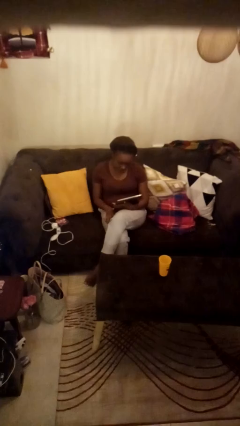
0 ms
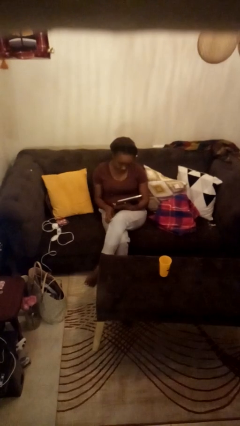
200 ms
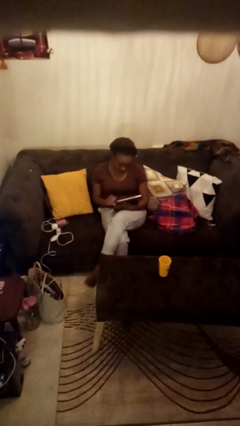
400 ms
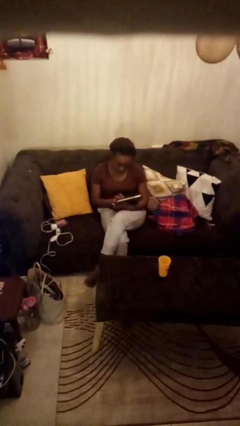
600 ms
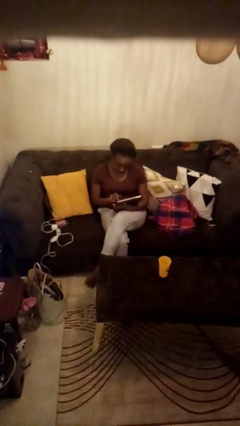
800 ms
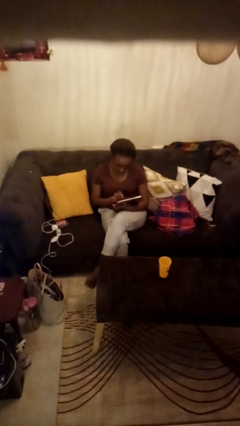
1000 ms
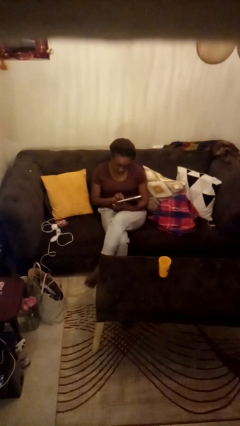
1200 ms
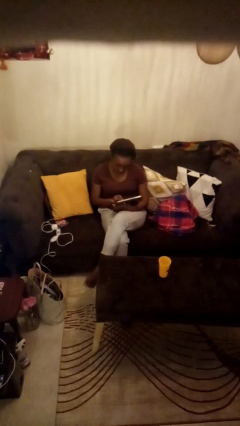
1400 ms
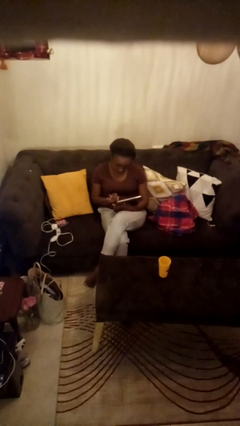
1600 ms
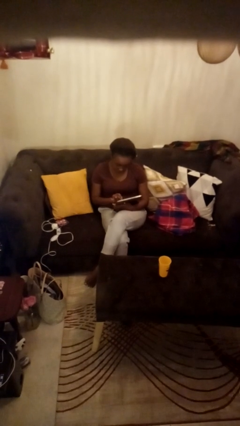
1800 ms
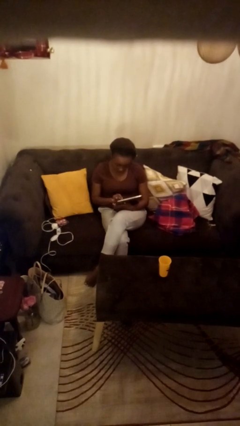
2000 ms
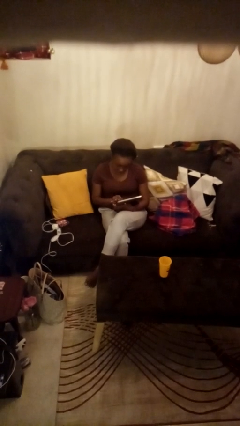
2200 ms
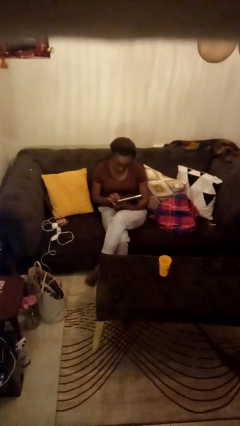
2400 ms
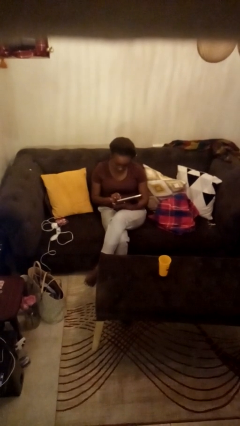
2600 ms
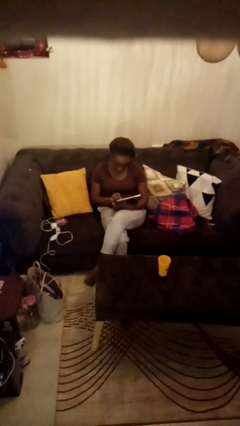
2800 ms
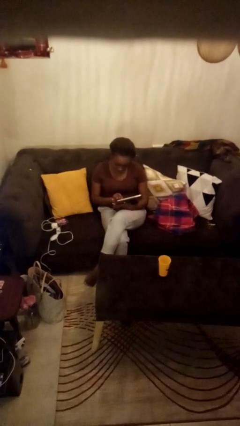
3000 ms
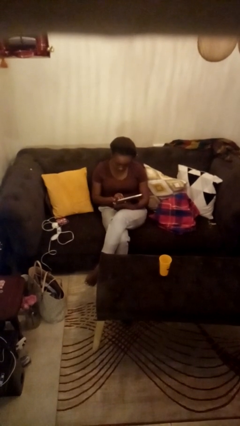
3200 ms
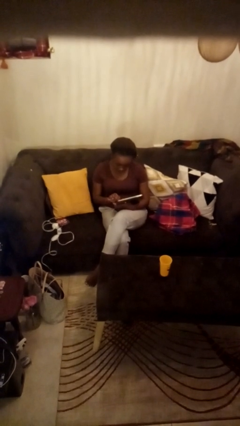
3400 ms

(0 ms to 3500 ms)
person interacts with tablet

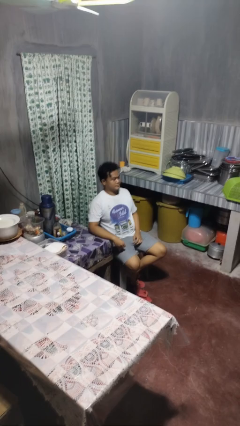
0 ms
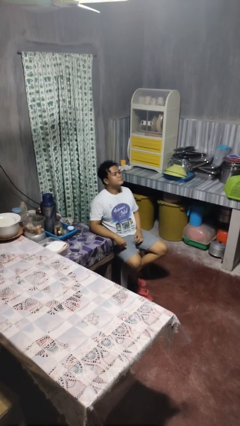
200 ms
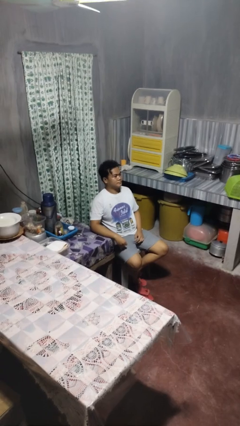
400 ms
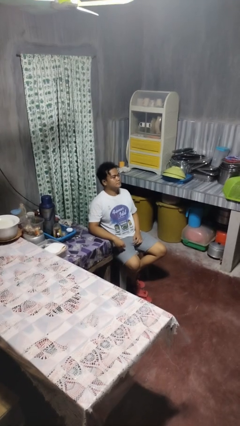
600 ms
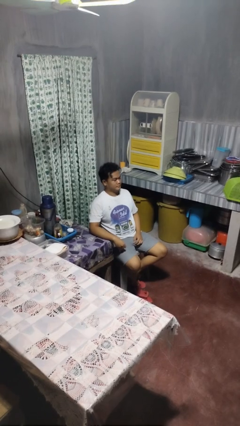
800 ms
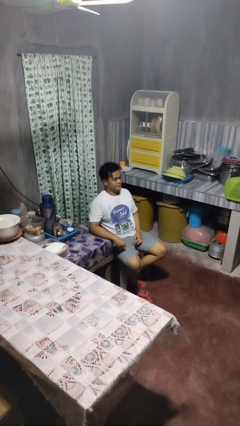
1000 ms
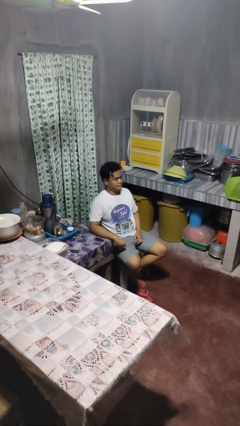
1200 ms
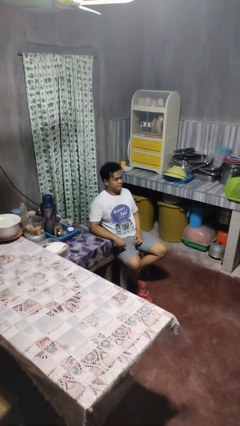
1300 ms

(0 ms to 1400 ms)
person nods head

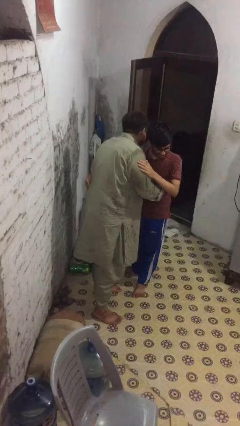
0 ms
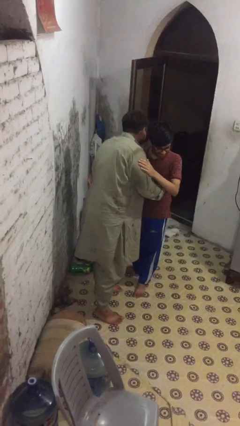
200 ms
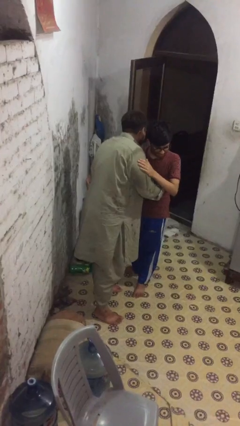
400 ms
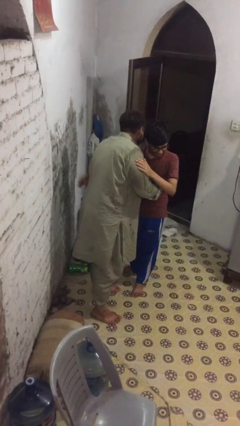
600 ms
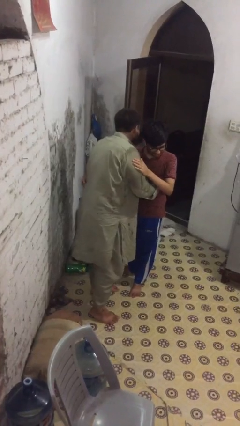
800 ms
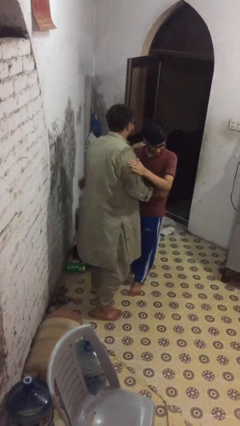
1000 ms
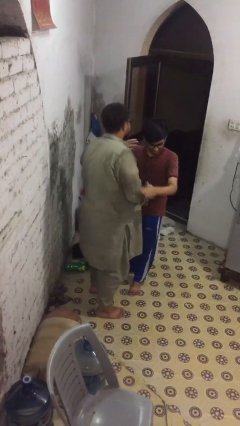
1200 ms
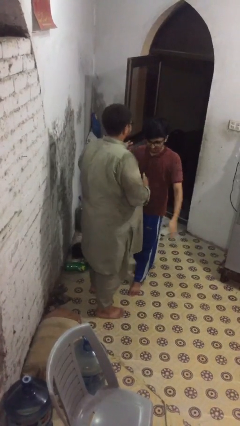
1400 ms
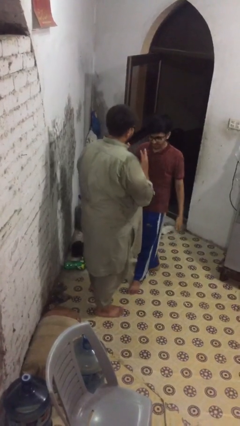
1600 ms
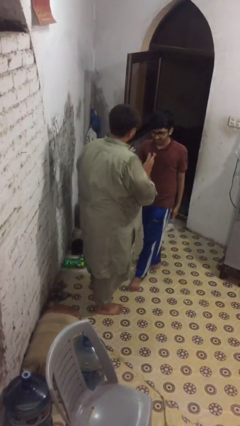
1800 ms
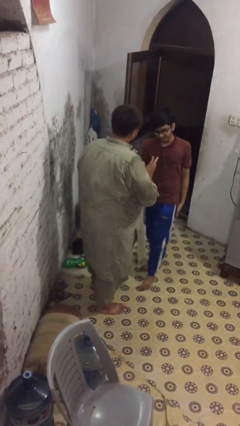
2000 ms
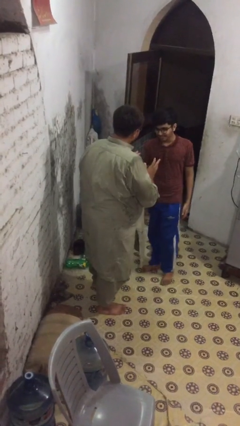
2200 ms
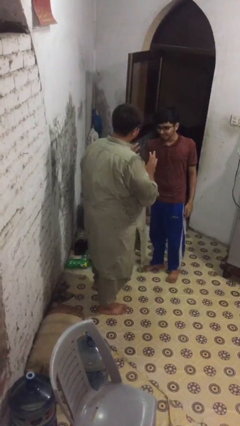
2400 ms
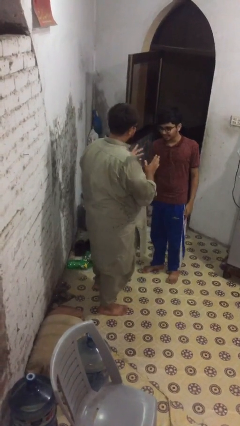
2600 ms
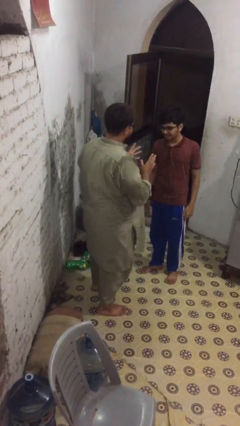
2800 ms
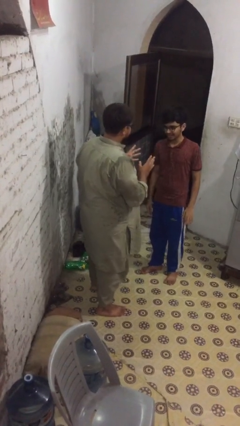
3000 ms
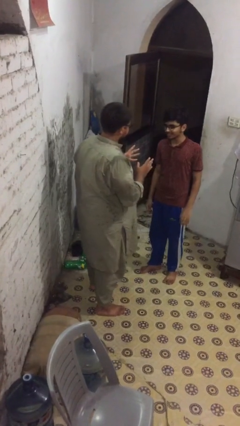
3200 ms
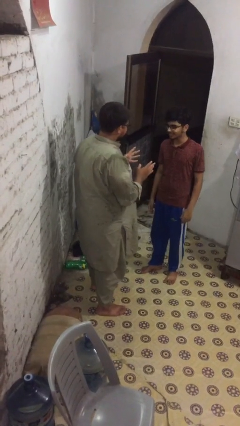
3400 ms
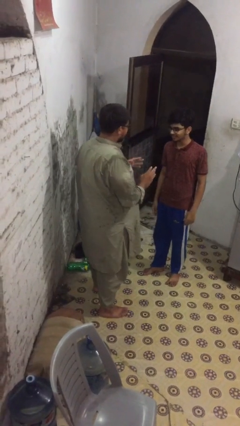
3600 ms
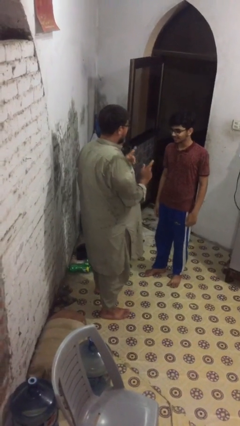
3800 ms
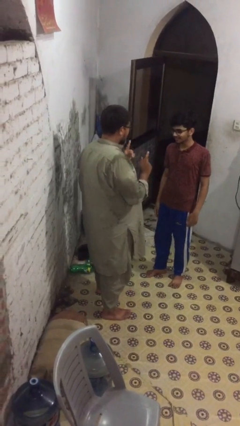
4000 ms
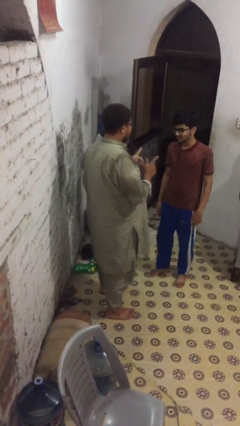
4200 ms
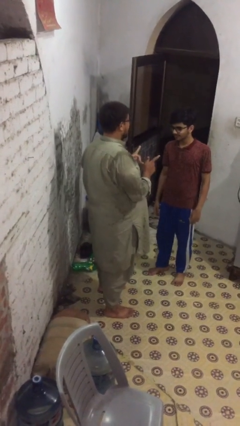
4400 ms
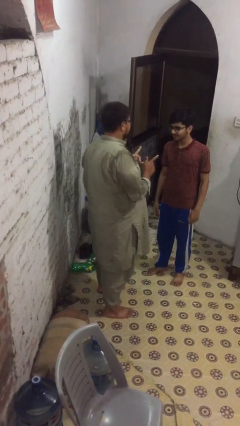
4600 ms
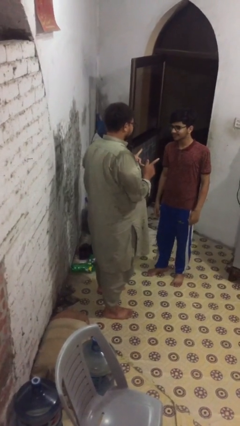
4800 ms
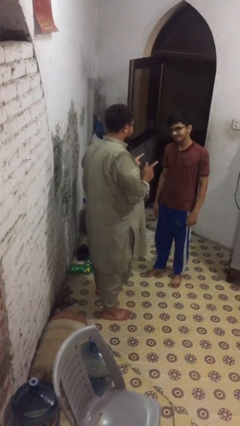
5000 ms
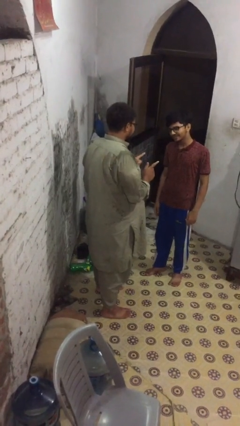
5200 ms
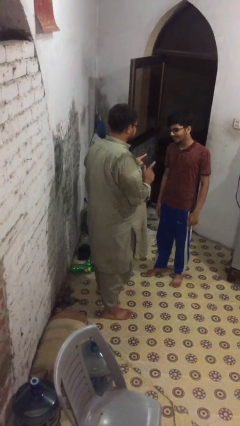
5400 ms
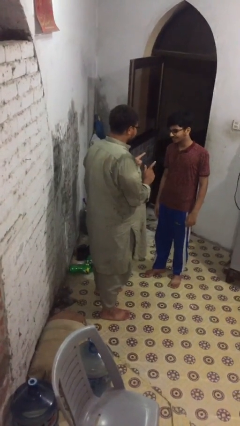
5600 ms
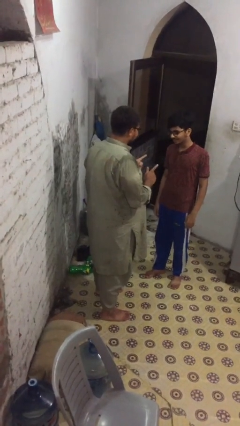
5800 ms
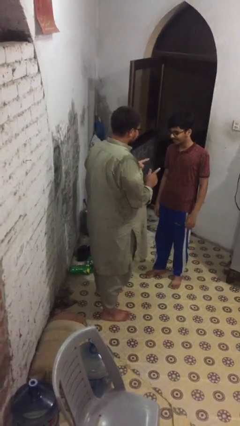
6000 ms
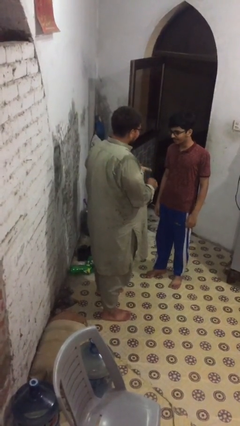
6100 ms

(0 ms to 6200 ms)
person talks to person

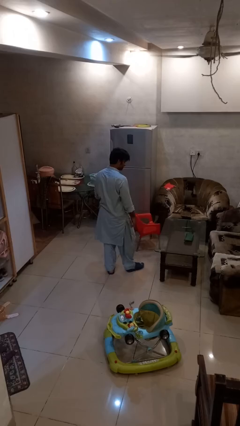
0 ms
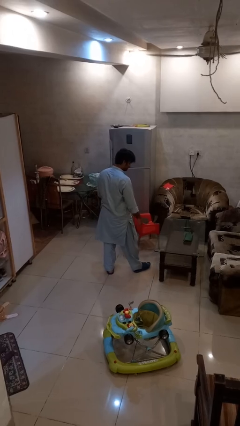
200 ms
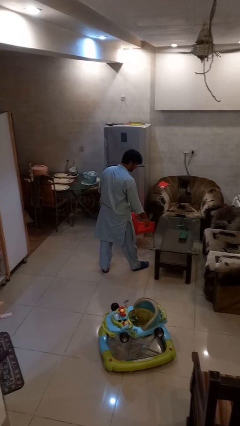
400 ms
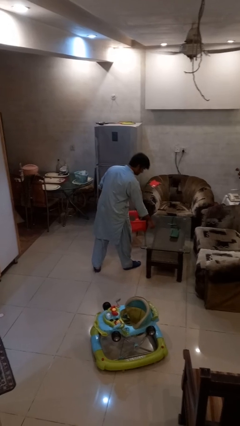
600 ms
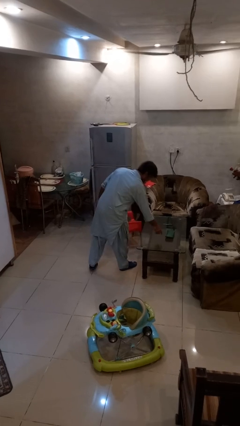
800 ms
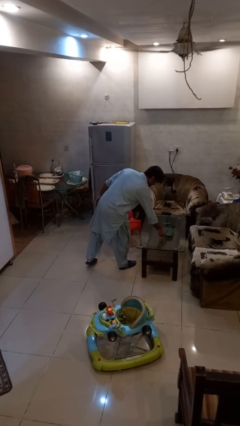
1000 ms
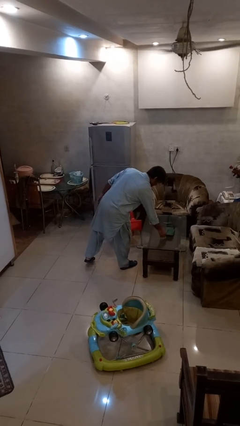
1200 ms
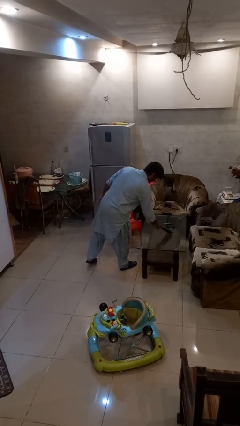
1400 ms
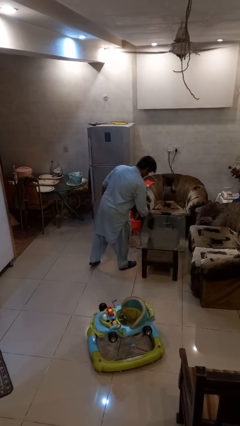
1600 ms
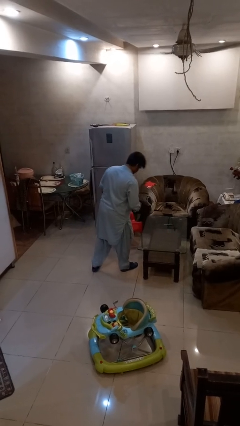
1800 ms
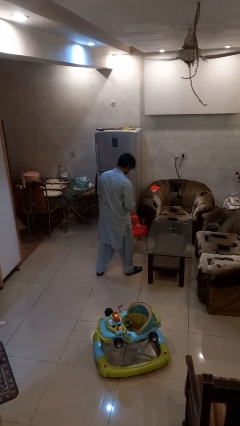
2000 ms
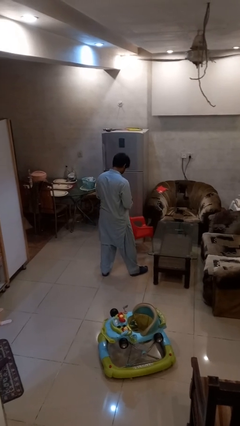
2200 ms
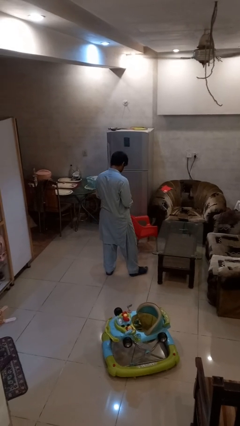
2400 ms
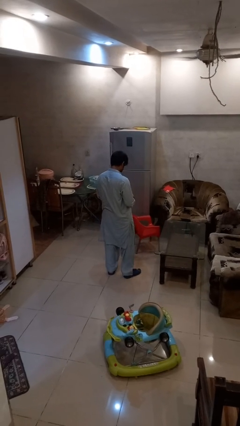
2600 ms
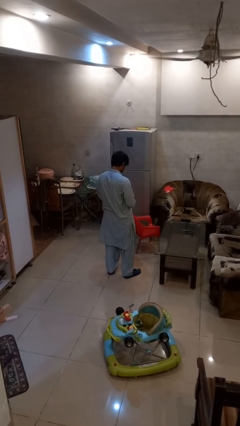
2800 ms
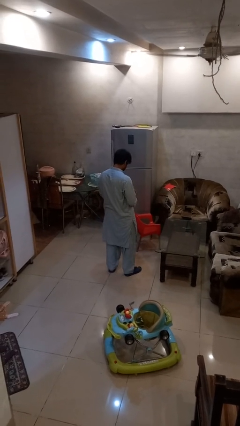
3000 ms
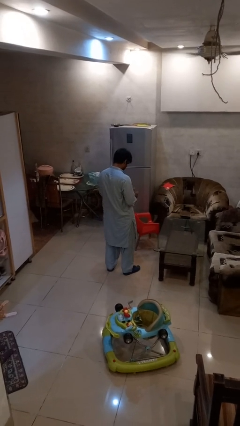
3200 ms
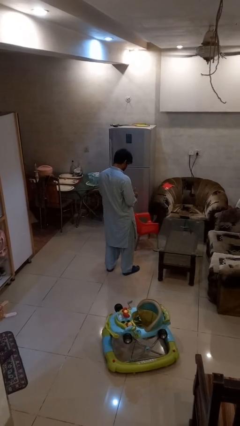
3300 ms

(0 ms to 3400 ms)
person picks up object from table

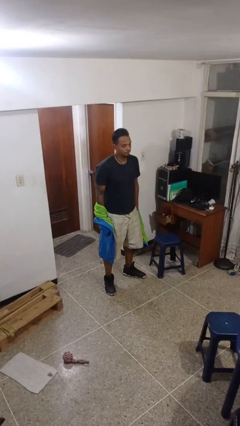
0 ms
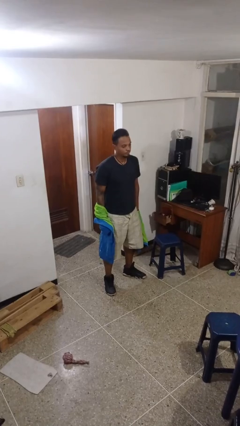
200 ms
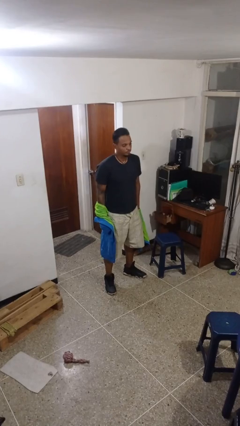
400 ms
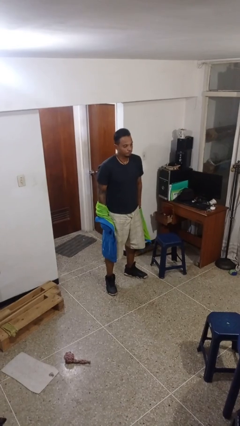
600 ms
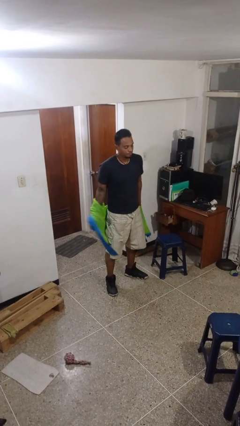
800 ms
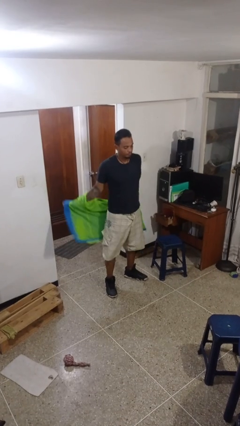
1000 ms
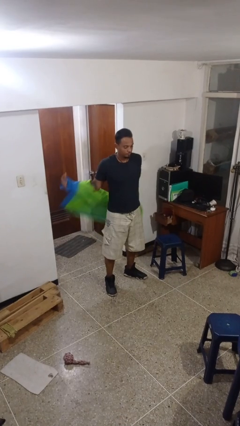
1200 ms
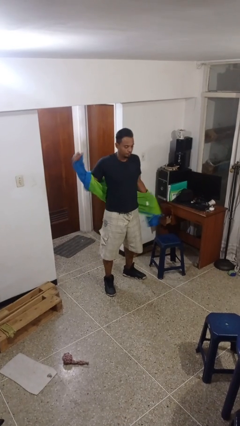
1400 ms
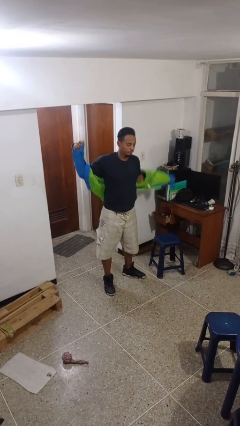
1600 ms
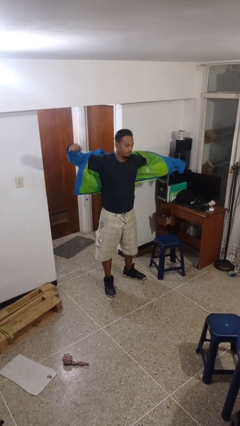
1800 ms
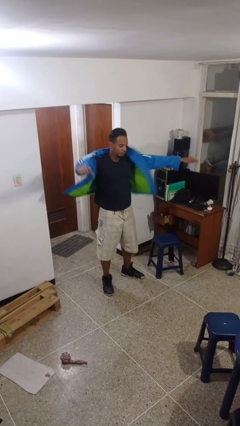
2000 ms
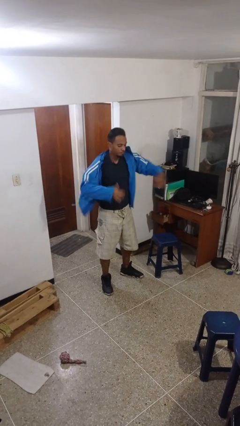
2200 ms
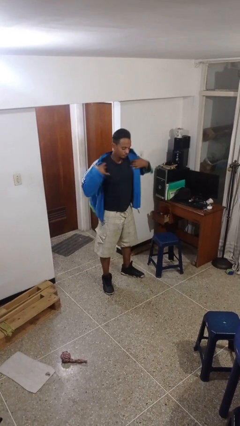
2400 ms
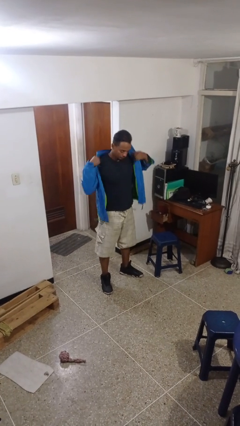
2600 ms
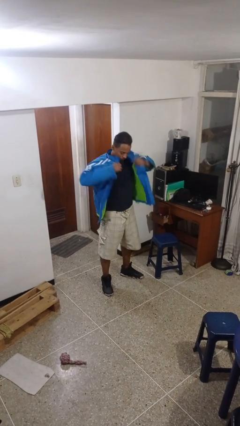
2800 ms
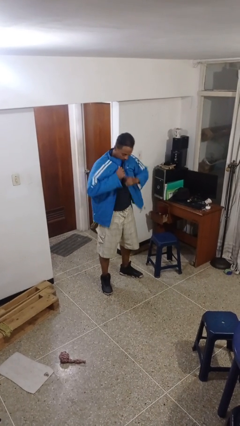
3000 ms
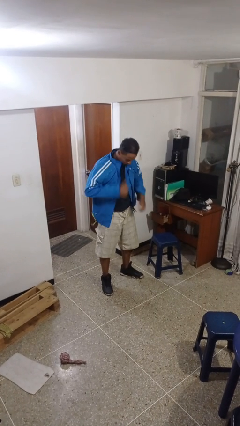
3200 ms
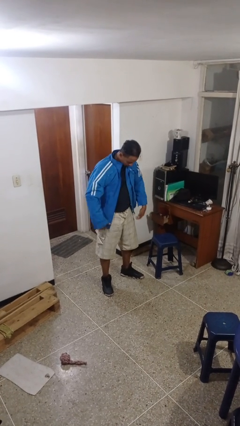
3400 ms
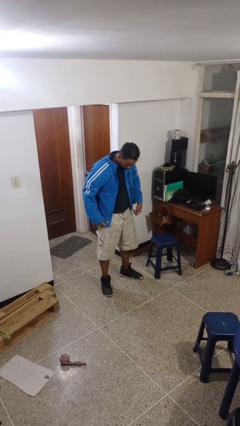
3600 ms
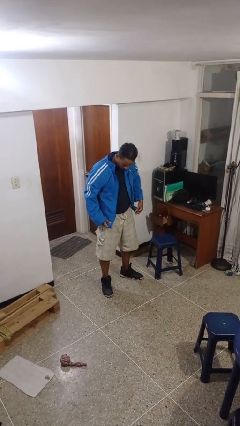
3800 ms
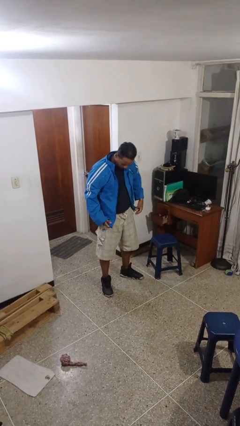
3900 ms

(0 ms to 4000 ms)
person puts on jacket
